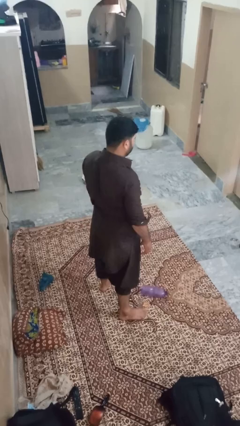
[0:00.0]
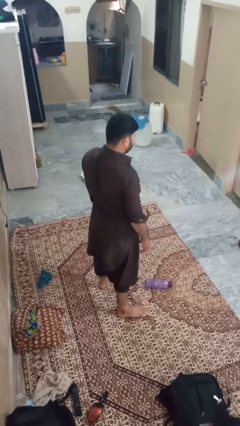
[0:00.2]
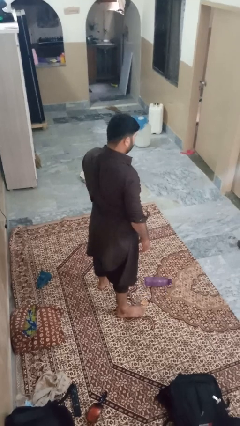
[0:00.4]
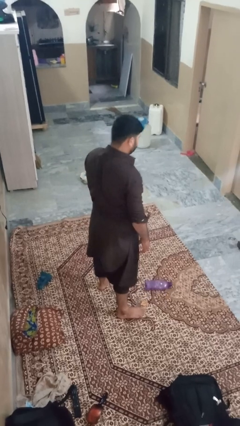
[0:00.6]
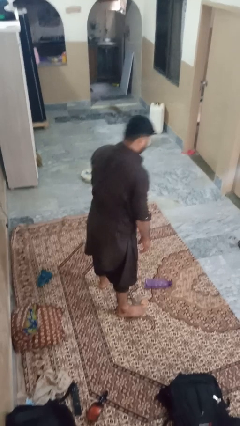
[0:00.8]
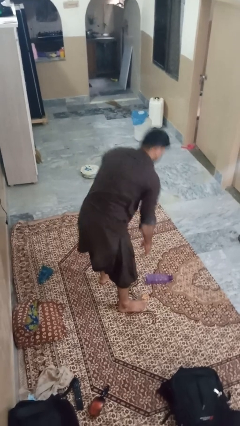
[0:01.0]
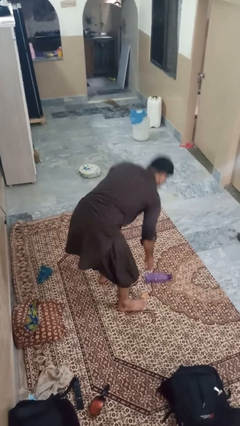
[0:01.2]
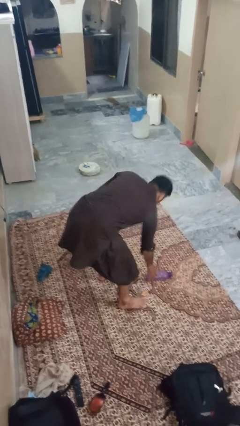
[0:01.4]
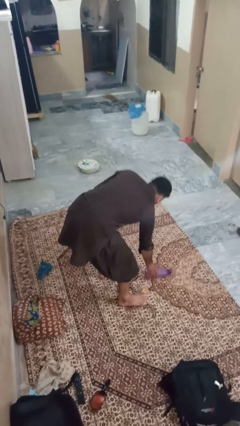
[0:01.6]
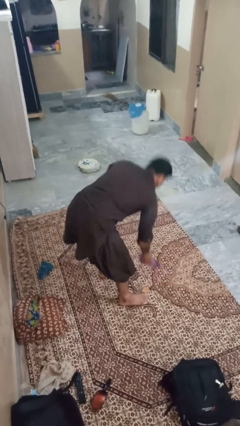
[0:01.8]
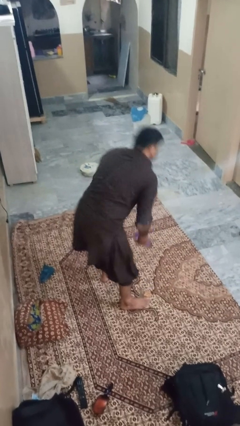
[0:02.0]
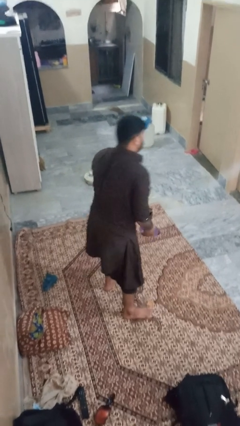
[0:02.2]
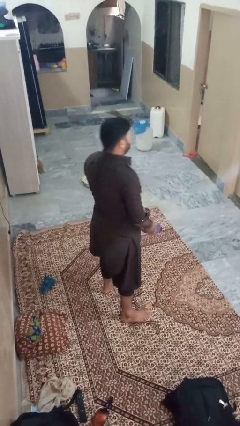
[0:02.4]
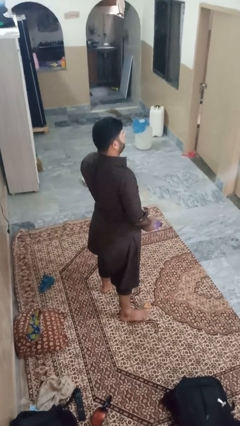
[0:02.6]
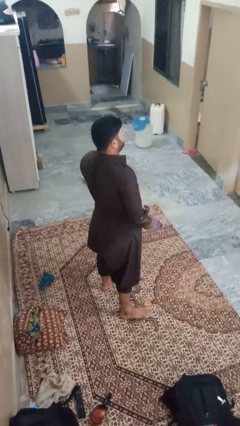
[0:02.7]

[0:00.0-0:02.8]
person picks up object from floor

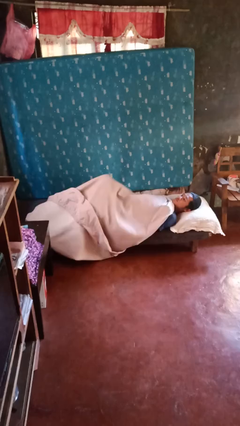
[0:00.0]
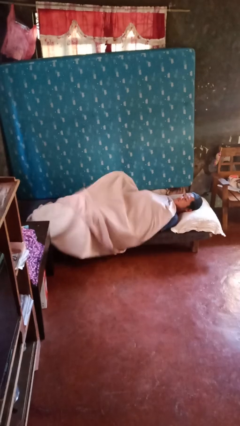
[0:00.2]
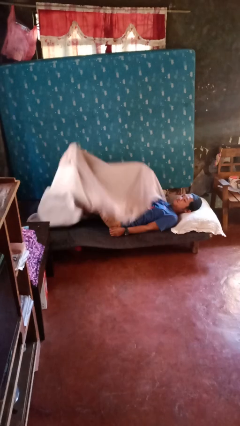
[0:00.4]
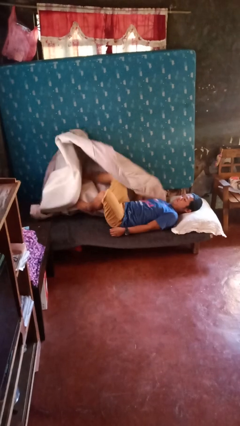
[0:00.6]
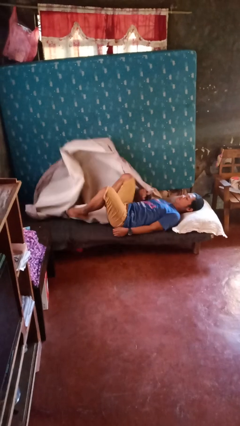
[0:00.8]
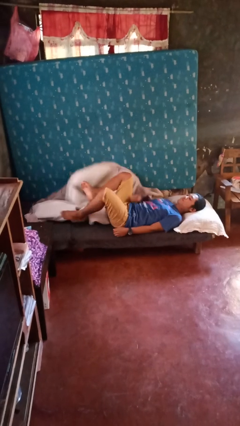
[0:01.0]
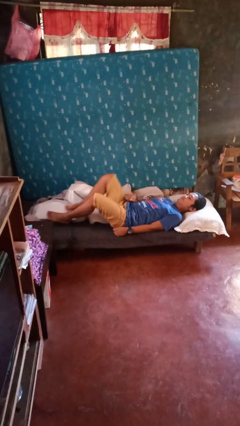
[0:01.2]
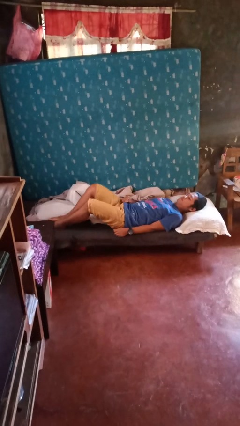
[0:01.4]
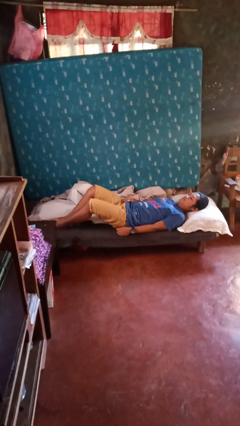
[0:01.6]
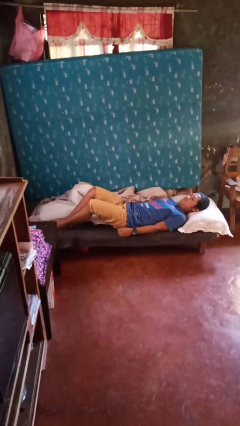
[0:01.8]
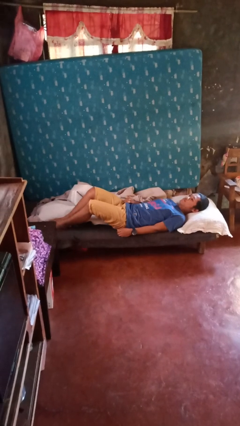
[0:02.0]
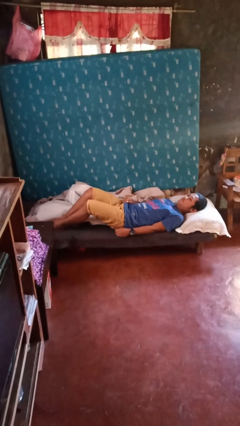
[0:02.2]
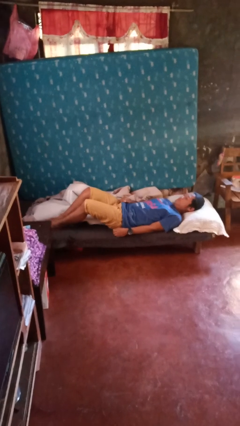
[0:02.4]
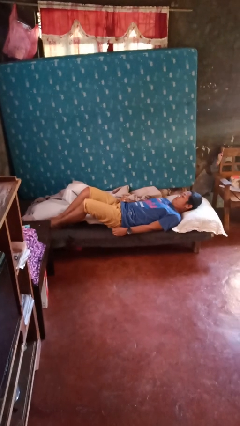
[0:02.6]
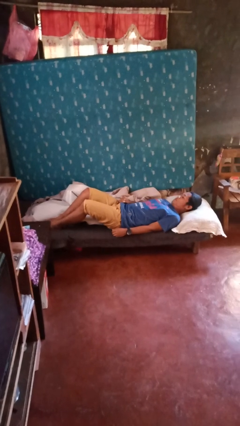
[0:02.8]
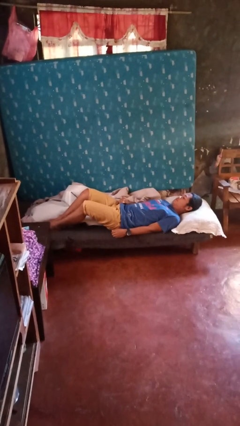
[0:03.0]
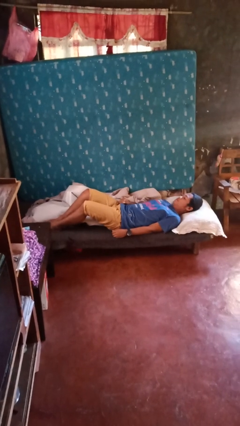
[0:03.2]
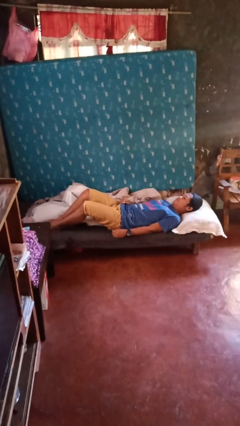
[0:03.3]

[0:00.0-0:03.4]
person uncovers with bedsheets

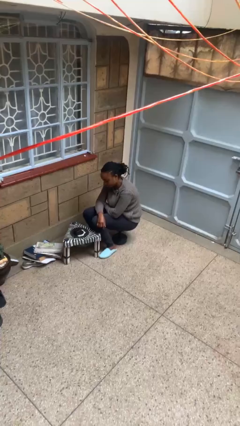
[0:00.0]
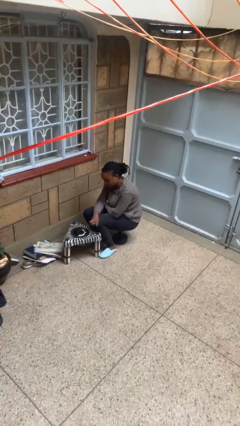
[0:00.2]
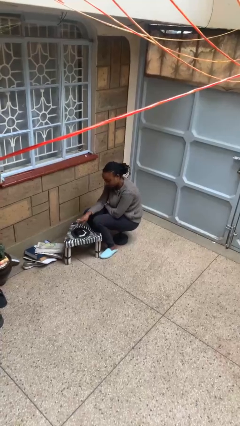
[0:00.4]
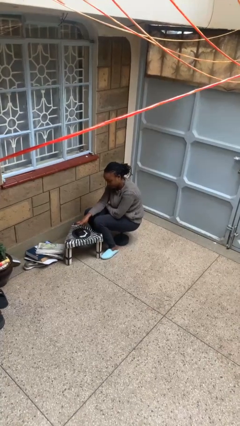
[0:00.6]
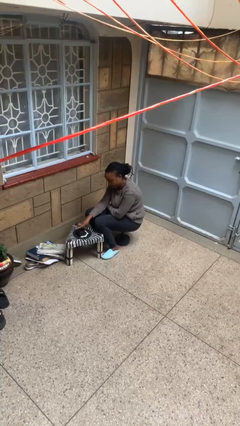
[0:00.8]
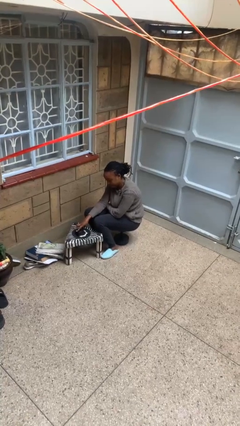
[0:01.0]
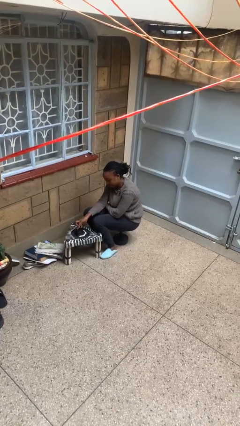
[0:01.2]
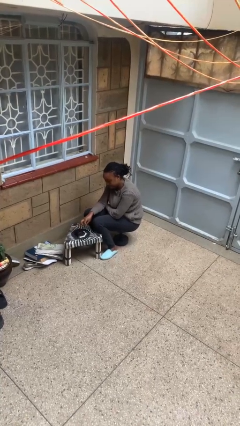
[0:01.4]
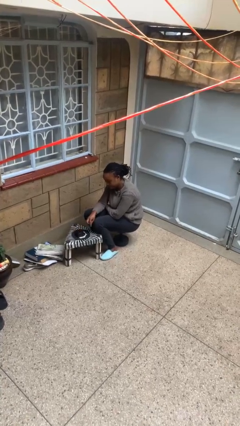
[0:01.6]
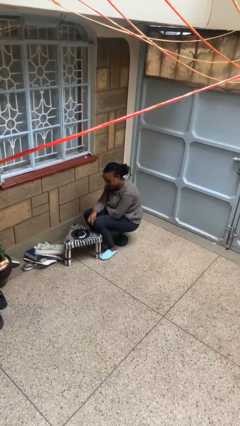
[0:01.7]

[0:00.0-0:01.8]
person taps object with finger

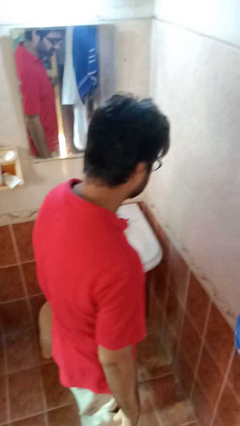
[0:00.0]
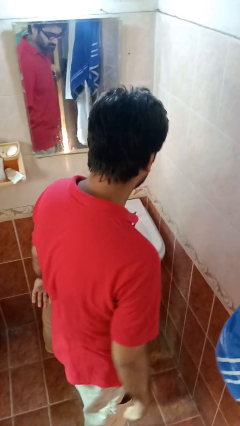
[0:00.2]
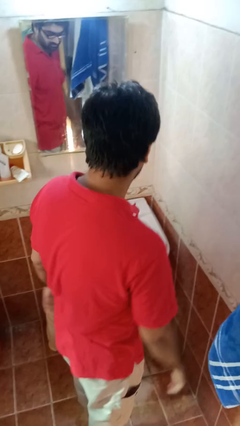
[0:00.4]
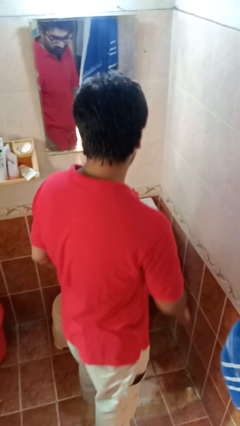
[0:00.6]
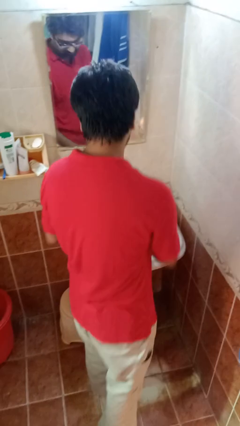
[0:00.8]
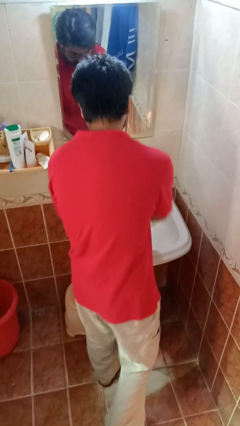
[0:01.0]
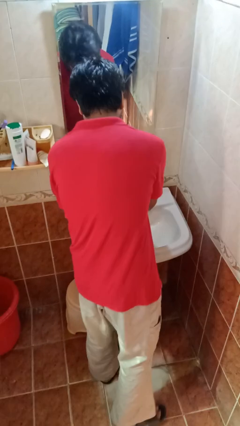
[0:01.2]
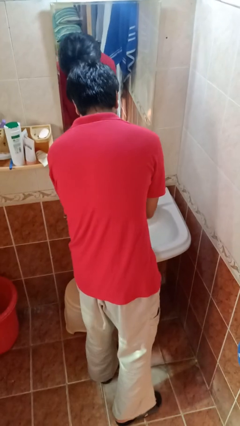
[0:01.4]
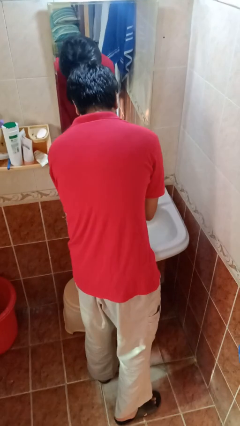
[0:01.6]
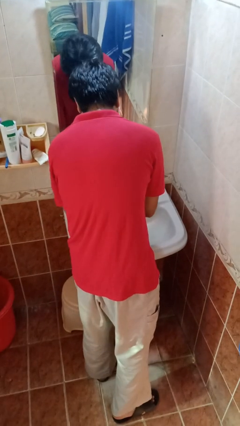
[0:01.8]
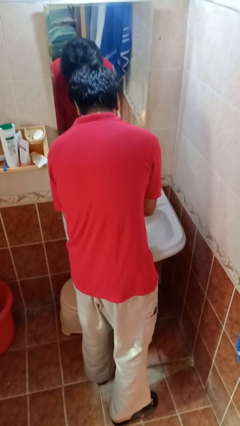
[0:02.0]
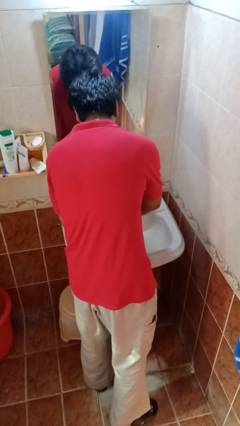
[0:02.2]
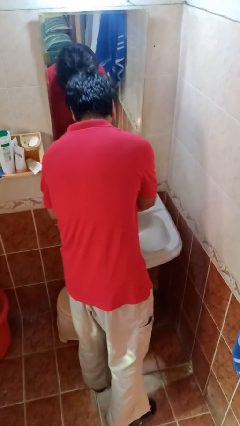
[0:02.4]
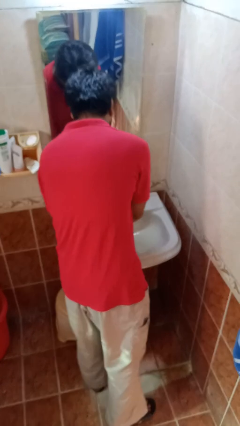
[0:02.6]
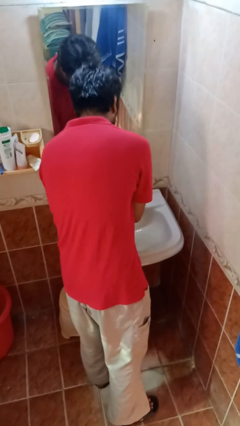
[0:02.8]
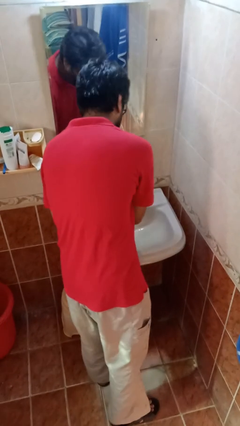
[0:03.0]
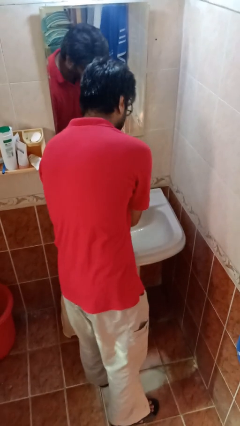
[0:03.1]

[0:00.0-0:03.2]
person washes hands

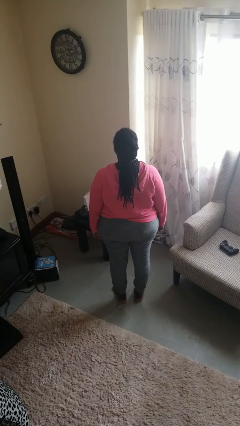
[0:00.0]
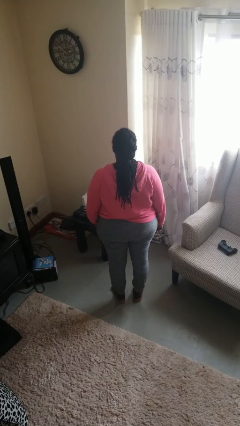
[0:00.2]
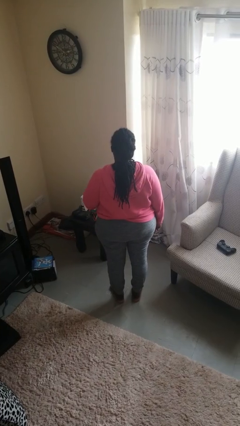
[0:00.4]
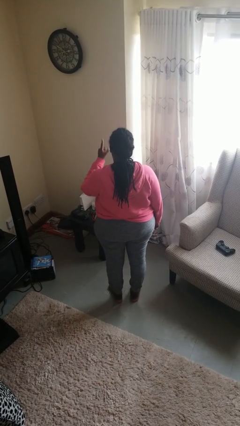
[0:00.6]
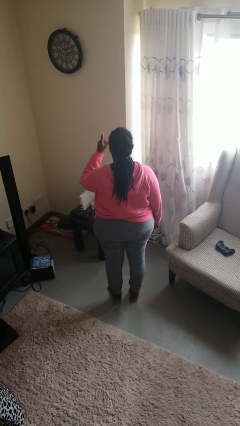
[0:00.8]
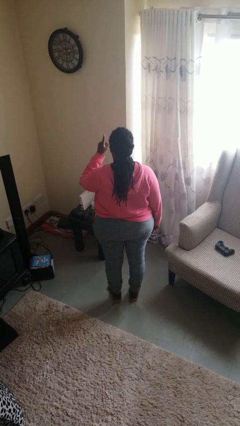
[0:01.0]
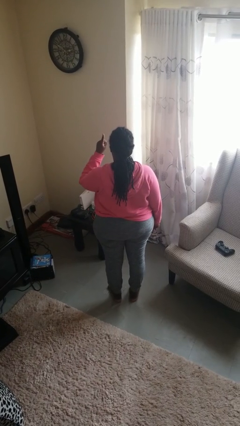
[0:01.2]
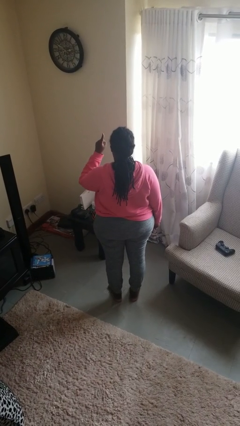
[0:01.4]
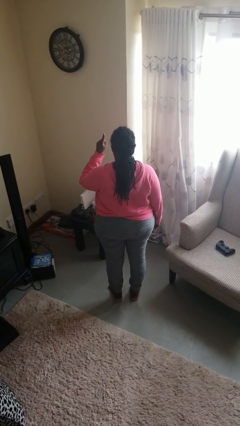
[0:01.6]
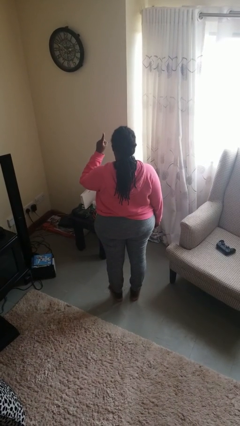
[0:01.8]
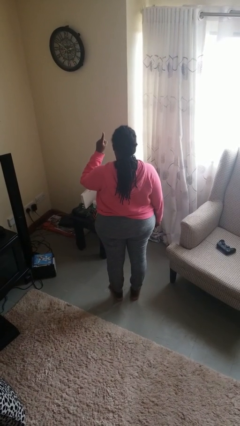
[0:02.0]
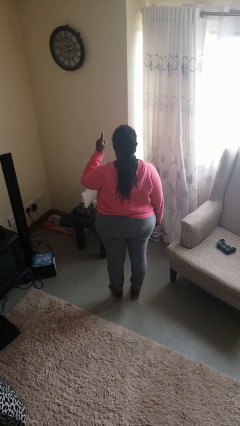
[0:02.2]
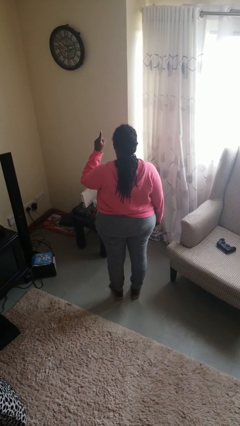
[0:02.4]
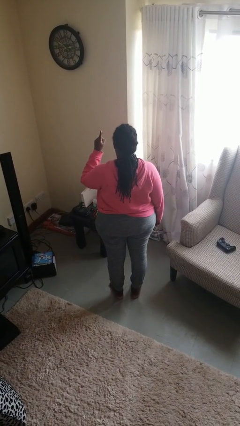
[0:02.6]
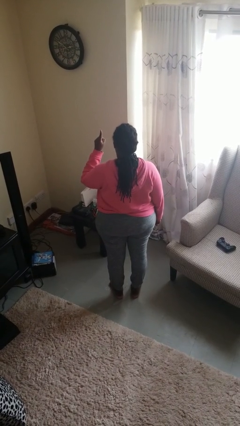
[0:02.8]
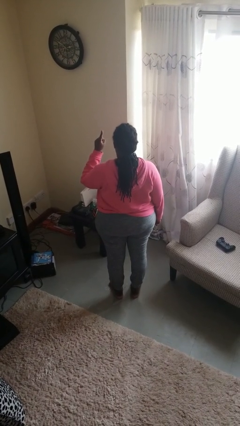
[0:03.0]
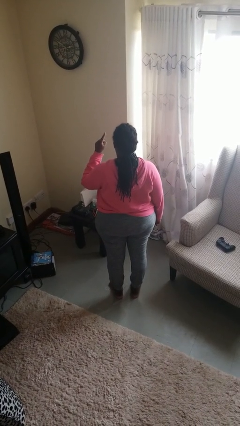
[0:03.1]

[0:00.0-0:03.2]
person gestures number one

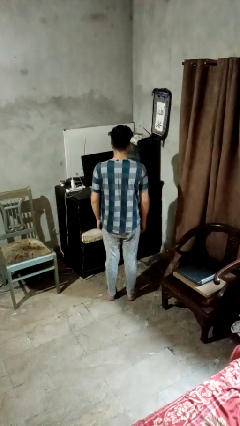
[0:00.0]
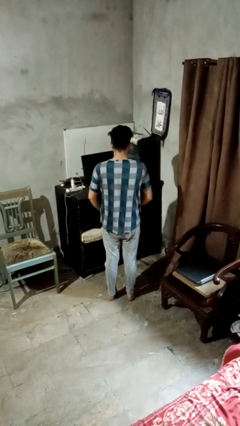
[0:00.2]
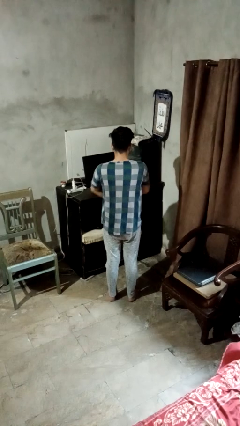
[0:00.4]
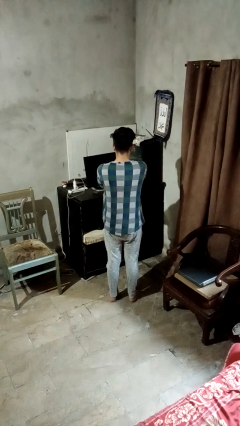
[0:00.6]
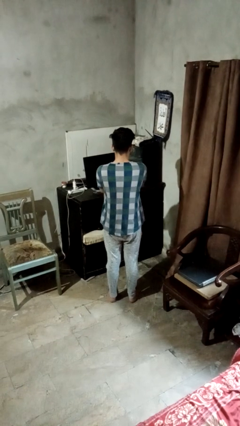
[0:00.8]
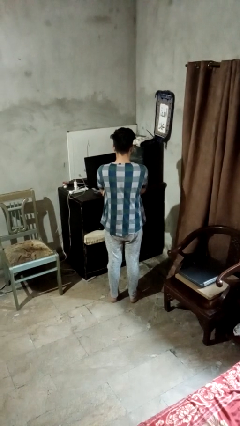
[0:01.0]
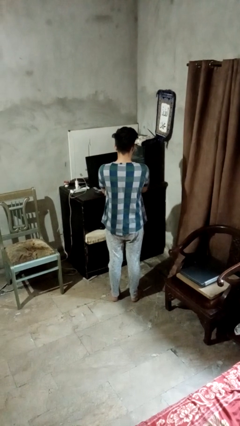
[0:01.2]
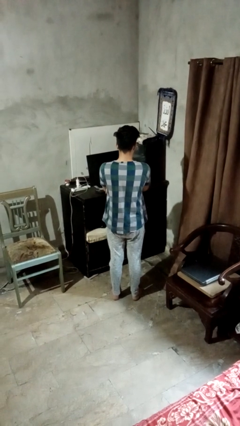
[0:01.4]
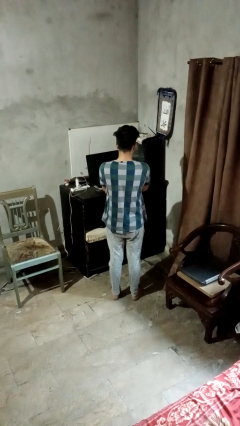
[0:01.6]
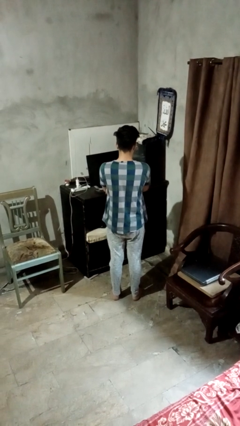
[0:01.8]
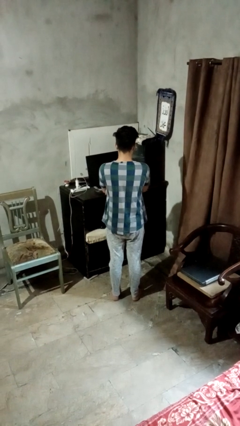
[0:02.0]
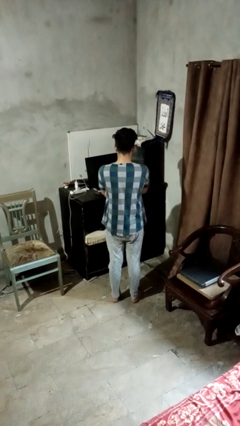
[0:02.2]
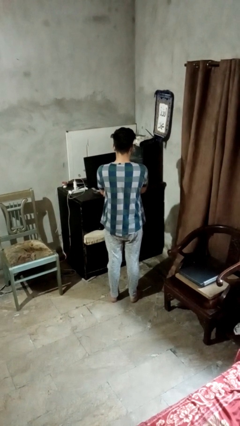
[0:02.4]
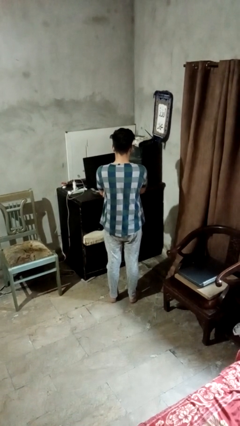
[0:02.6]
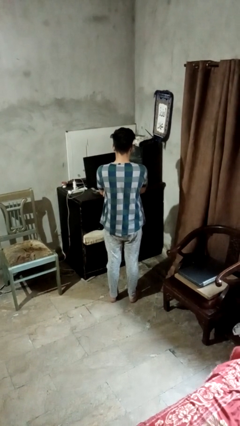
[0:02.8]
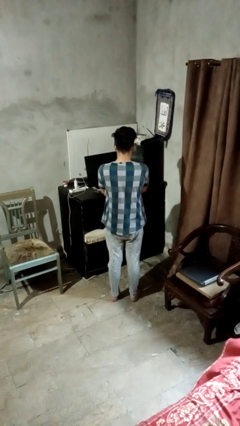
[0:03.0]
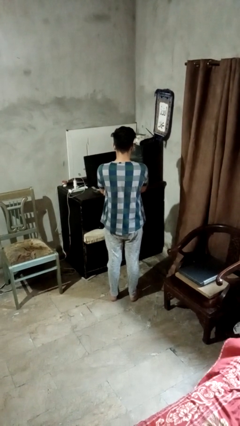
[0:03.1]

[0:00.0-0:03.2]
person crosses arms
